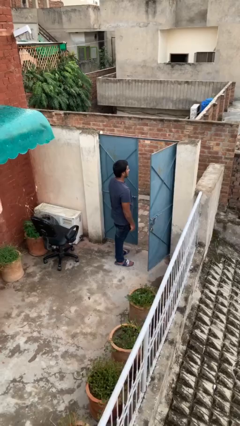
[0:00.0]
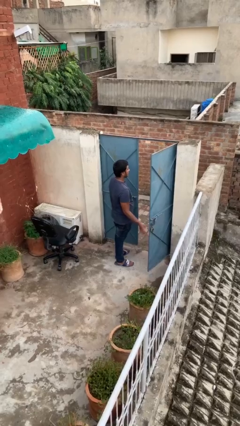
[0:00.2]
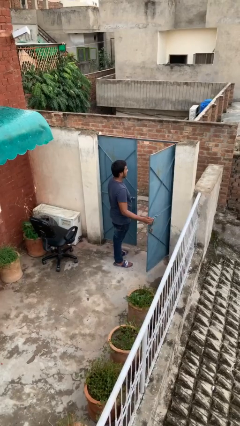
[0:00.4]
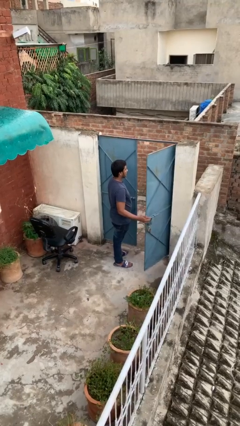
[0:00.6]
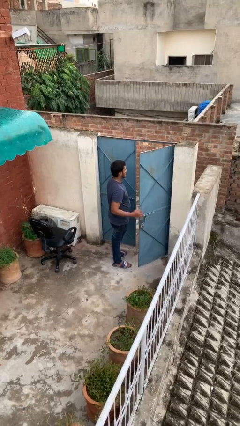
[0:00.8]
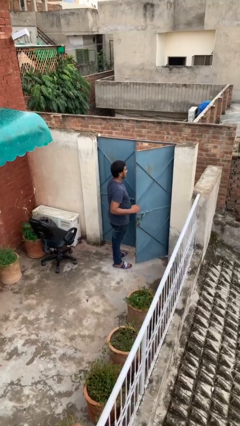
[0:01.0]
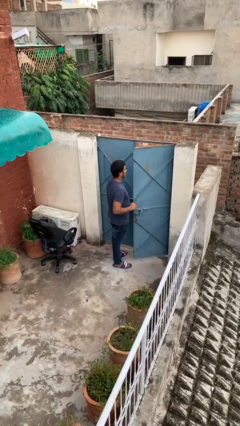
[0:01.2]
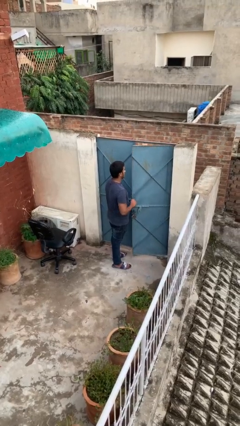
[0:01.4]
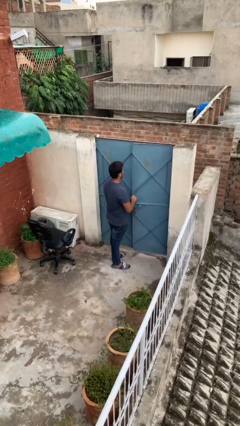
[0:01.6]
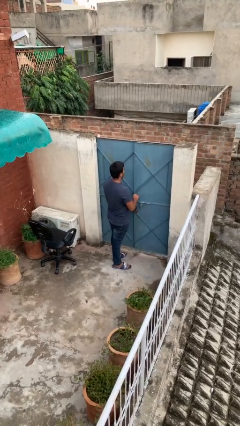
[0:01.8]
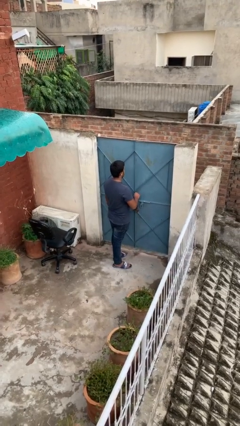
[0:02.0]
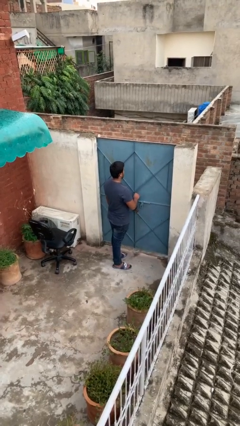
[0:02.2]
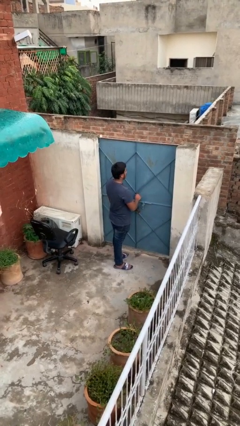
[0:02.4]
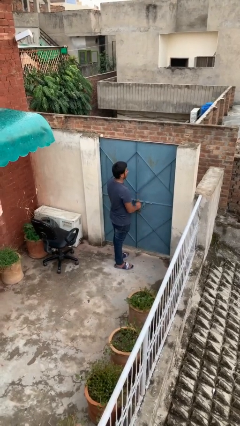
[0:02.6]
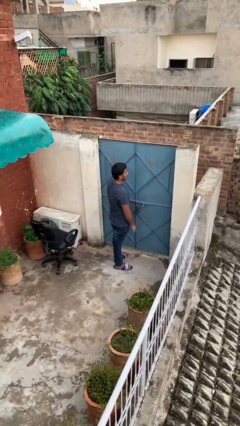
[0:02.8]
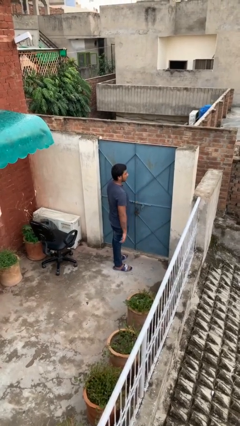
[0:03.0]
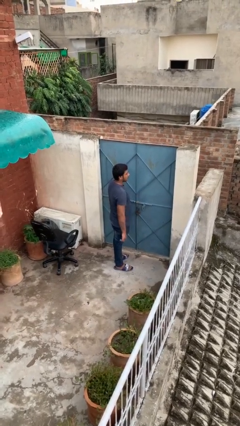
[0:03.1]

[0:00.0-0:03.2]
person closes facility door

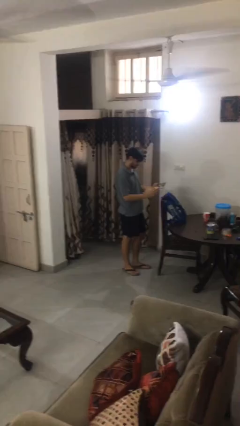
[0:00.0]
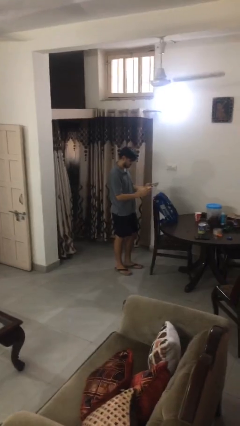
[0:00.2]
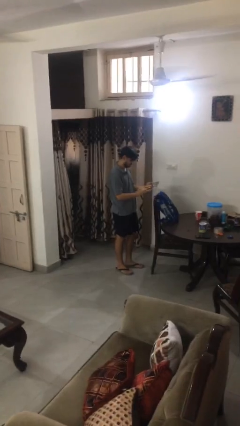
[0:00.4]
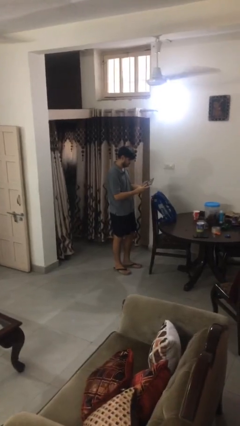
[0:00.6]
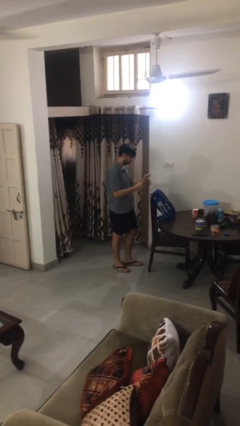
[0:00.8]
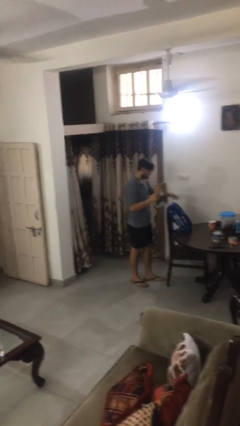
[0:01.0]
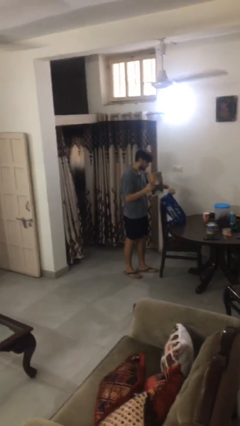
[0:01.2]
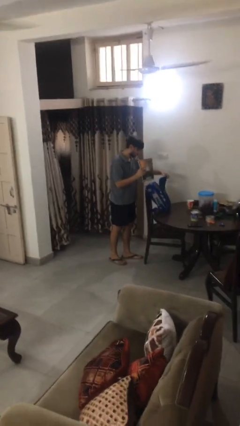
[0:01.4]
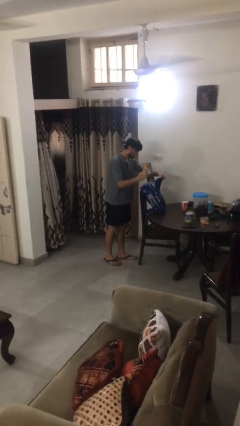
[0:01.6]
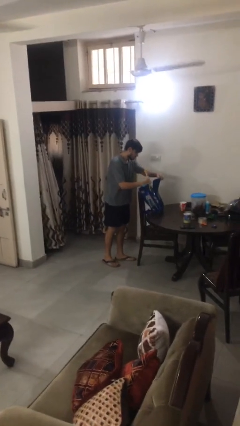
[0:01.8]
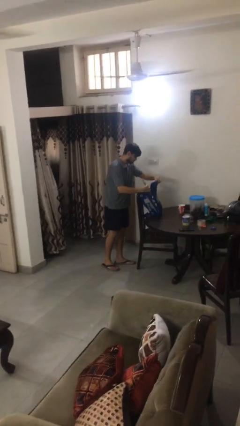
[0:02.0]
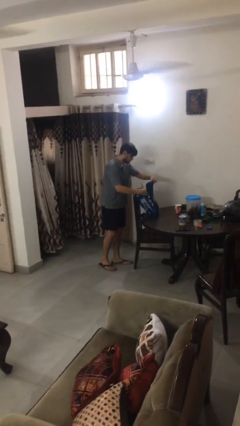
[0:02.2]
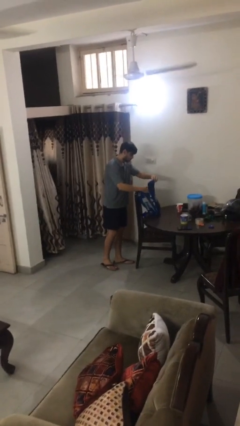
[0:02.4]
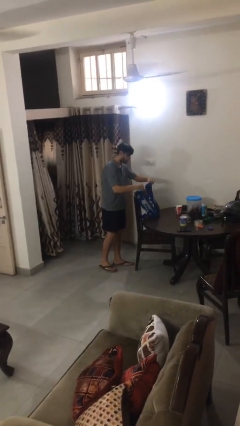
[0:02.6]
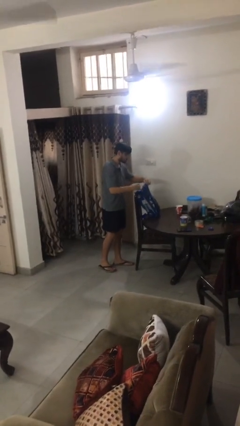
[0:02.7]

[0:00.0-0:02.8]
person puts object into backpack

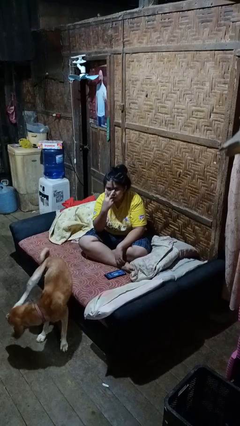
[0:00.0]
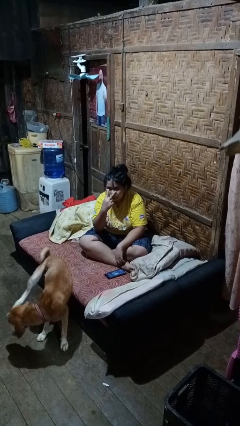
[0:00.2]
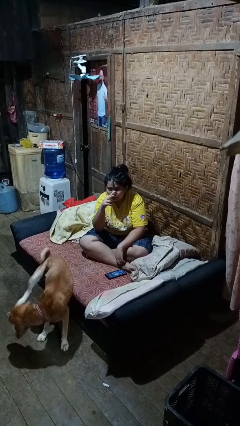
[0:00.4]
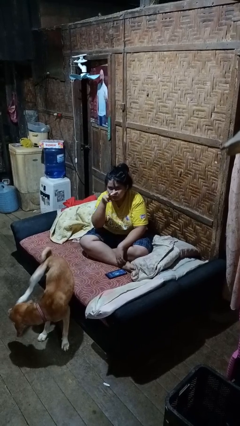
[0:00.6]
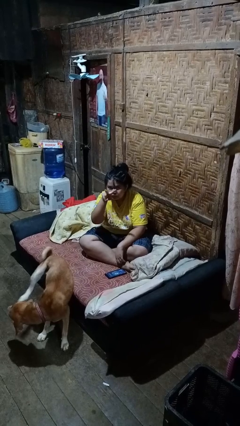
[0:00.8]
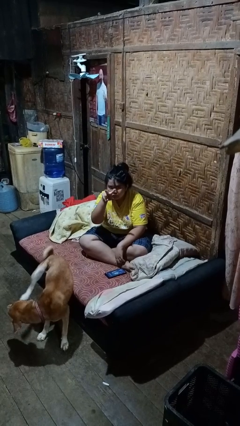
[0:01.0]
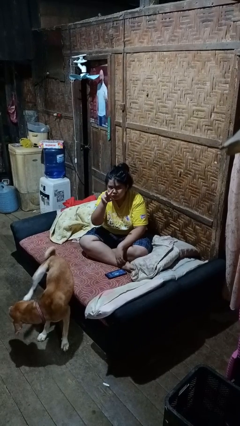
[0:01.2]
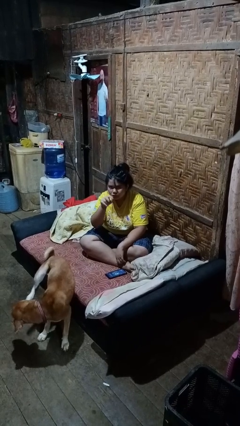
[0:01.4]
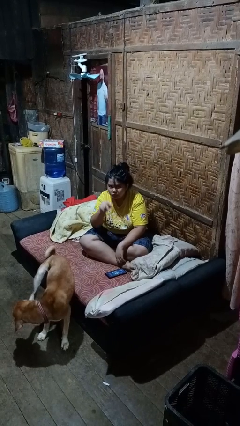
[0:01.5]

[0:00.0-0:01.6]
person gestures watch closely

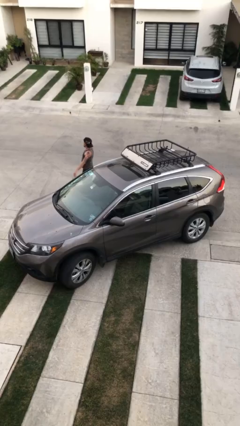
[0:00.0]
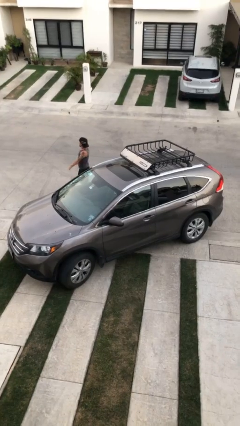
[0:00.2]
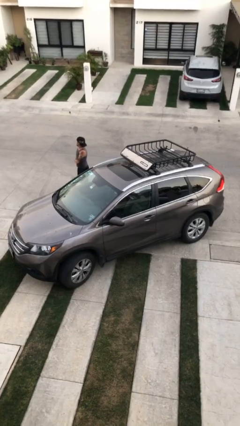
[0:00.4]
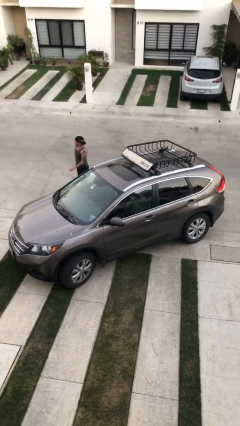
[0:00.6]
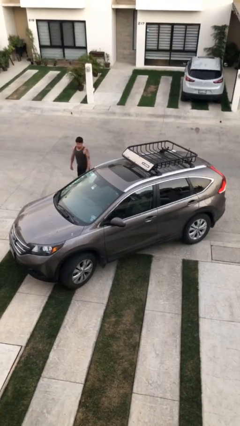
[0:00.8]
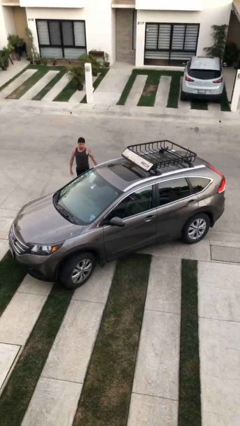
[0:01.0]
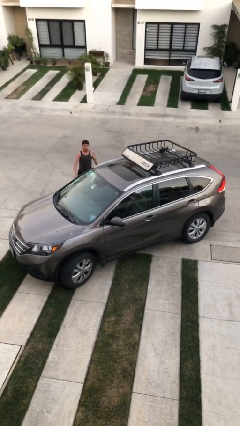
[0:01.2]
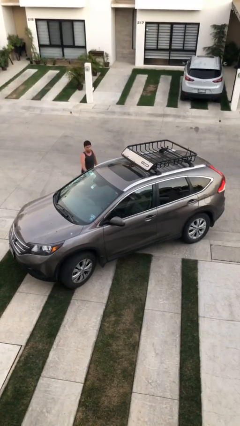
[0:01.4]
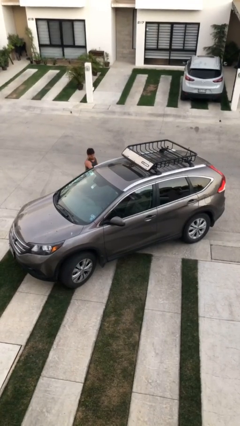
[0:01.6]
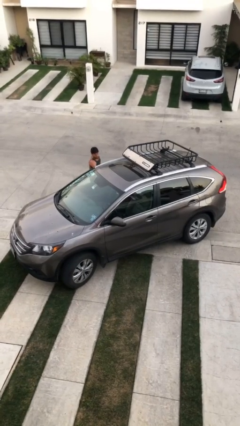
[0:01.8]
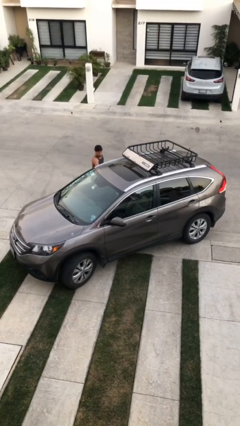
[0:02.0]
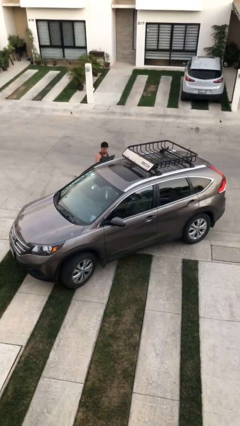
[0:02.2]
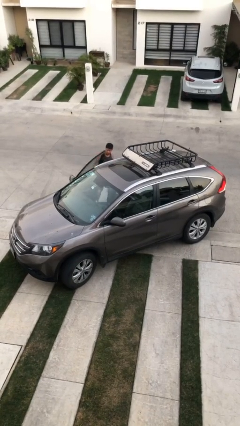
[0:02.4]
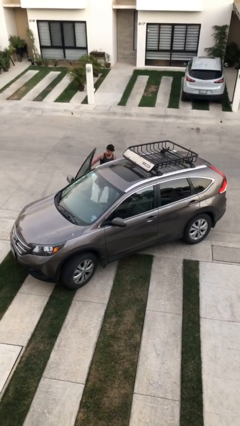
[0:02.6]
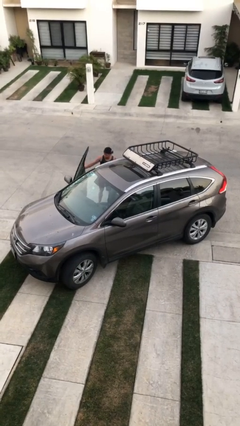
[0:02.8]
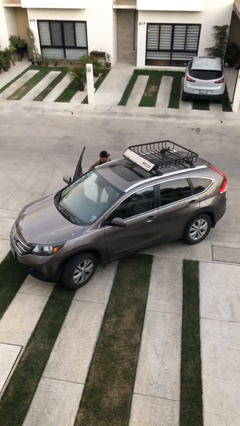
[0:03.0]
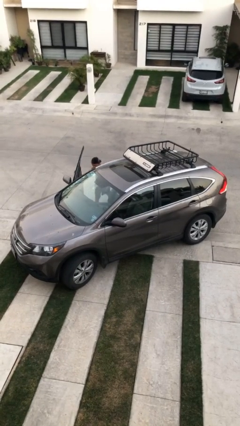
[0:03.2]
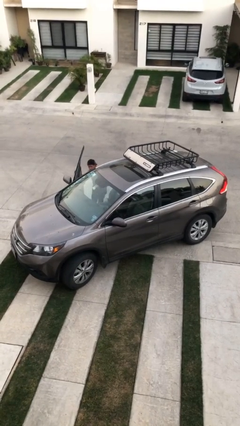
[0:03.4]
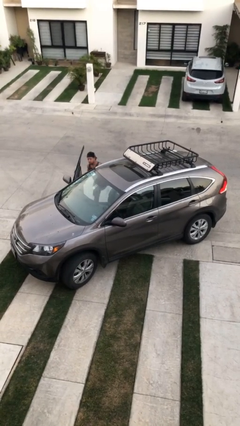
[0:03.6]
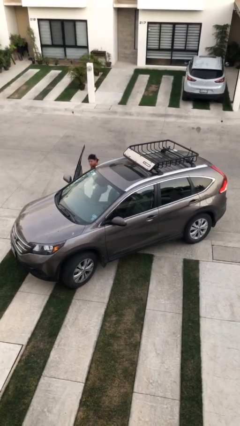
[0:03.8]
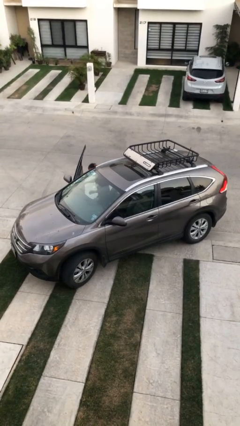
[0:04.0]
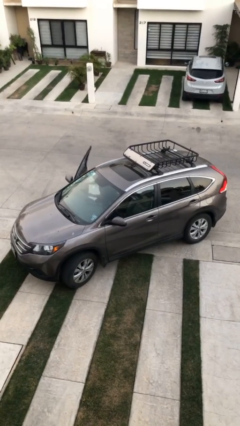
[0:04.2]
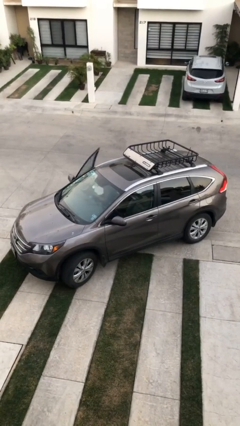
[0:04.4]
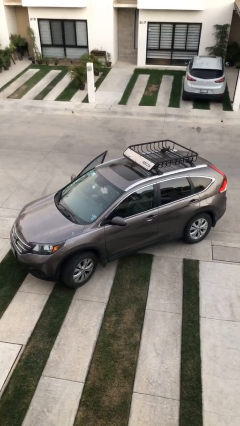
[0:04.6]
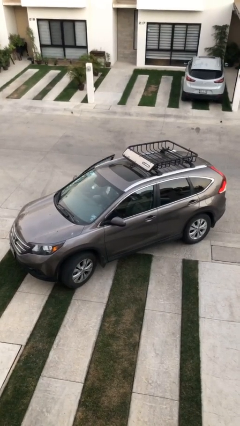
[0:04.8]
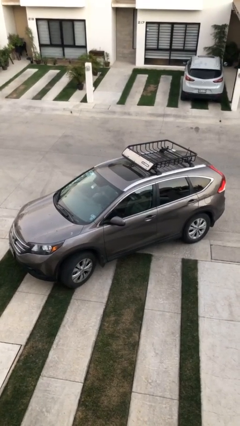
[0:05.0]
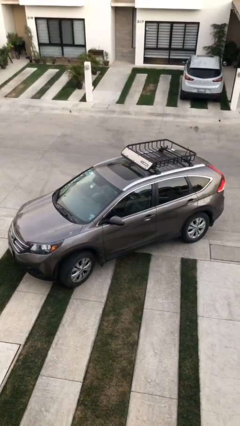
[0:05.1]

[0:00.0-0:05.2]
car picks up person

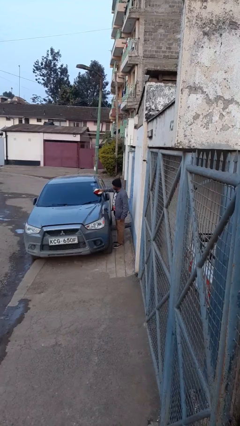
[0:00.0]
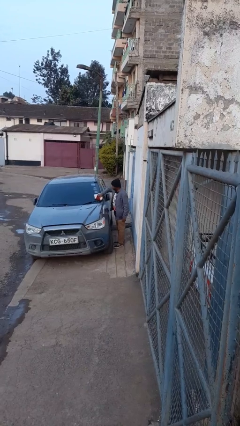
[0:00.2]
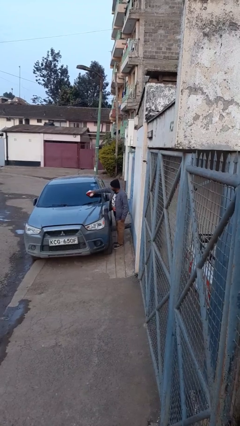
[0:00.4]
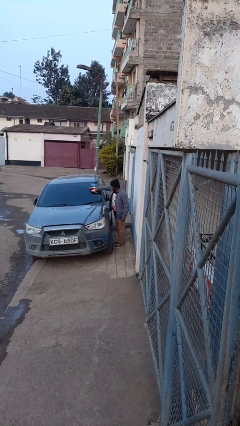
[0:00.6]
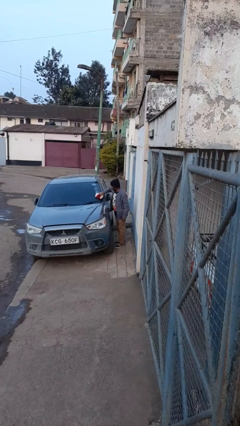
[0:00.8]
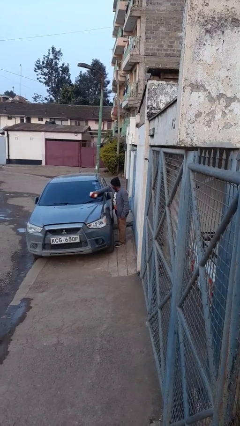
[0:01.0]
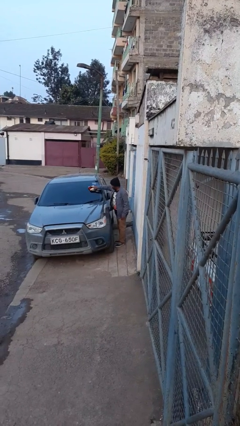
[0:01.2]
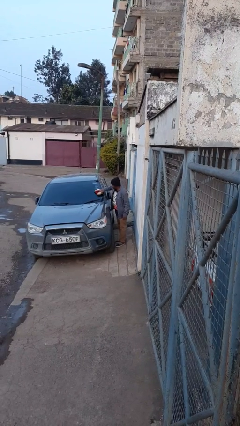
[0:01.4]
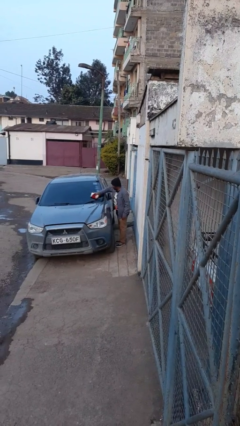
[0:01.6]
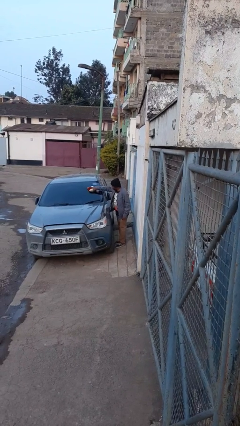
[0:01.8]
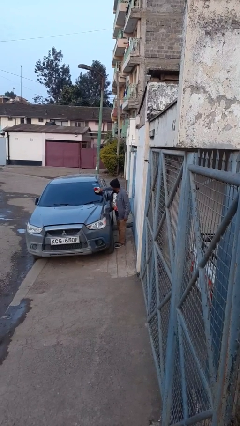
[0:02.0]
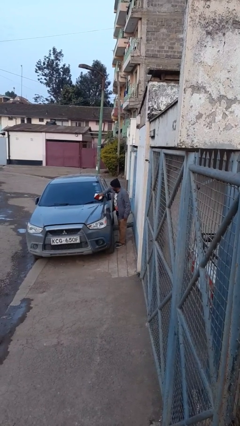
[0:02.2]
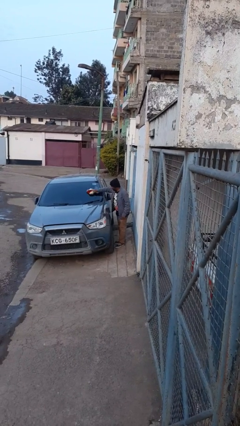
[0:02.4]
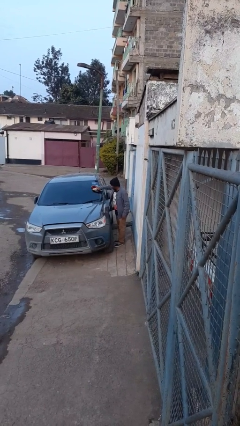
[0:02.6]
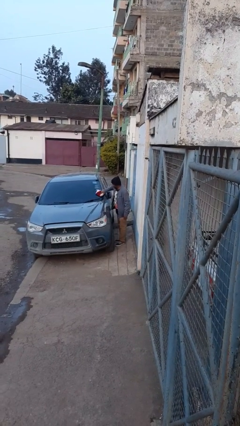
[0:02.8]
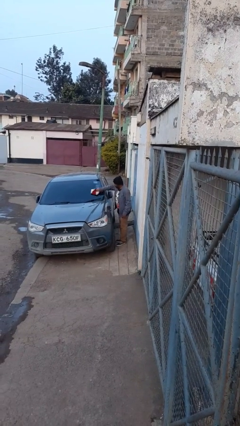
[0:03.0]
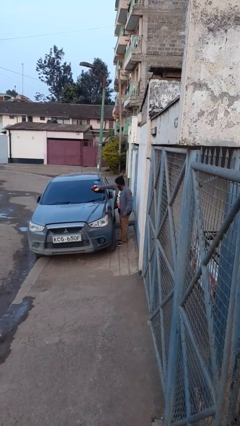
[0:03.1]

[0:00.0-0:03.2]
person polishes car with rag

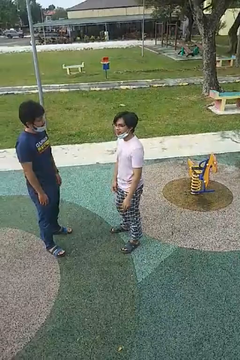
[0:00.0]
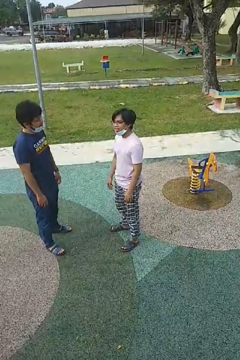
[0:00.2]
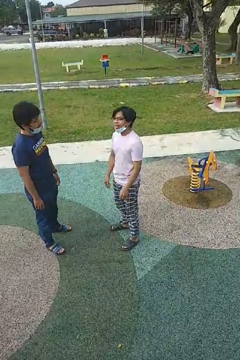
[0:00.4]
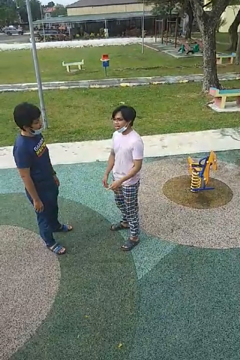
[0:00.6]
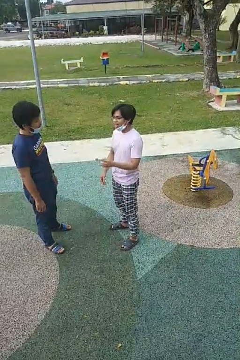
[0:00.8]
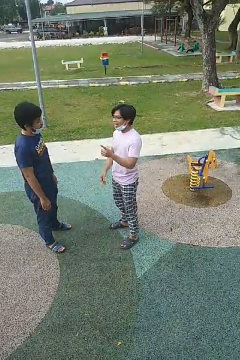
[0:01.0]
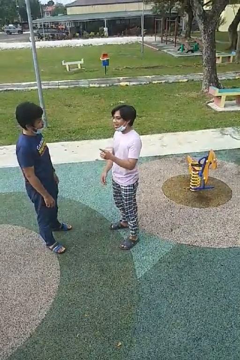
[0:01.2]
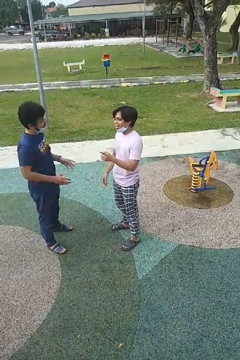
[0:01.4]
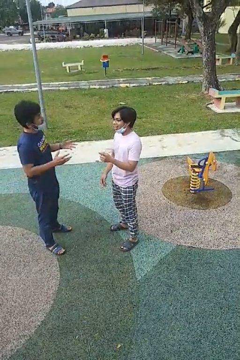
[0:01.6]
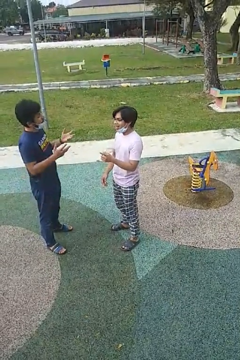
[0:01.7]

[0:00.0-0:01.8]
person talks to person
